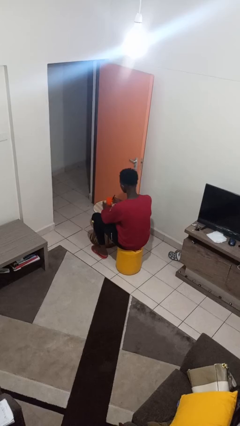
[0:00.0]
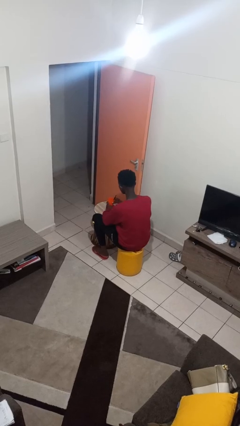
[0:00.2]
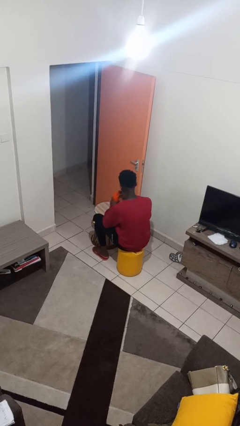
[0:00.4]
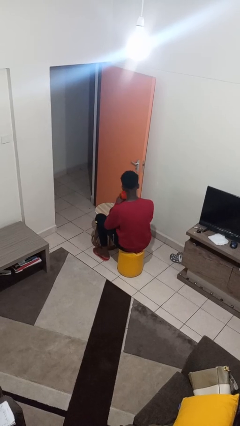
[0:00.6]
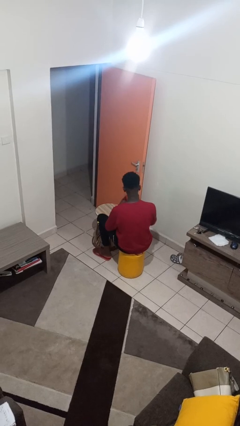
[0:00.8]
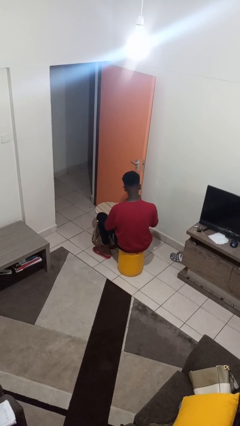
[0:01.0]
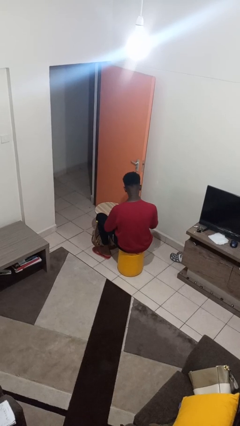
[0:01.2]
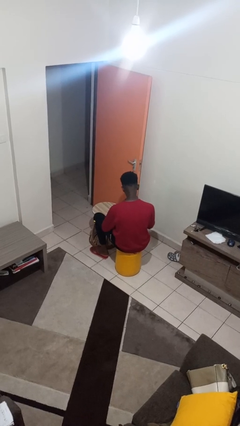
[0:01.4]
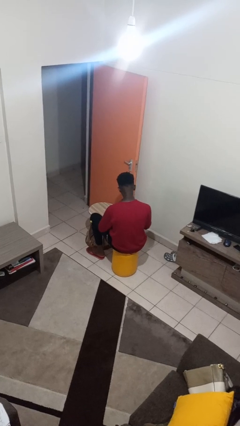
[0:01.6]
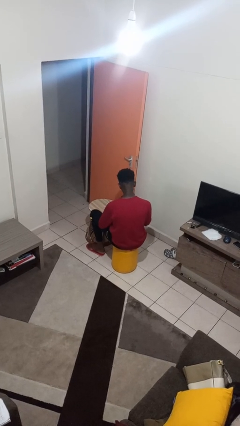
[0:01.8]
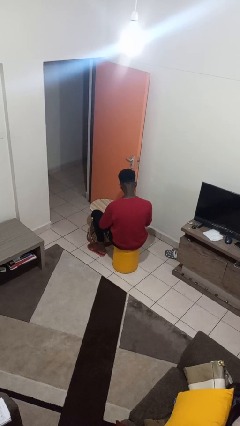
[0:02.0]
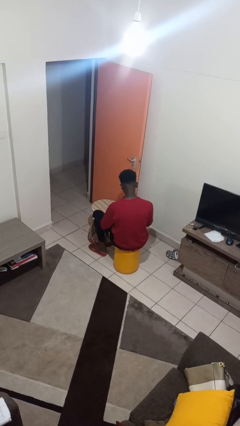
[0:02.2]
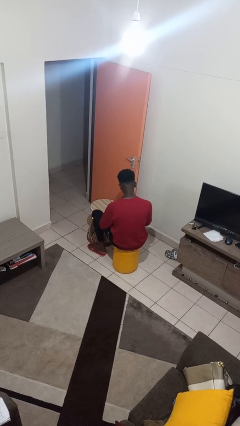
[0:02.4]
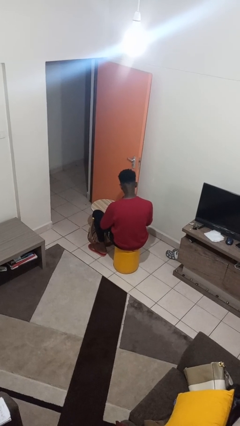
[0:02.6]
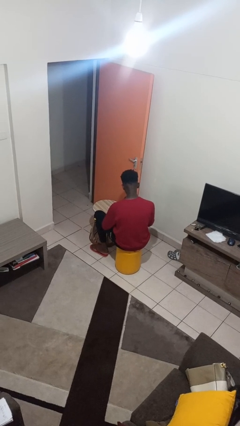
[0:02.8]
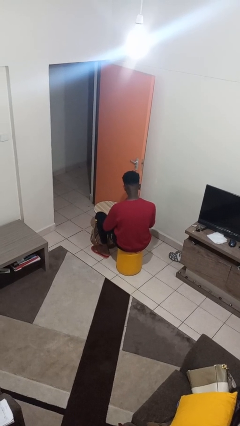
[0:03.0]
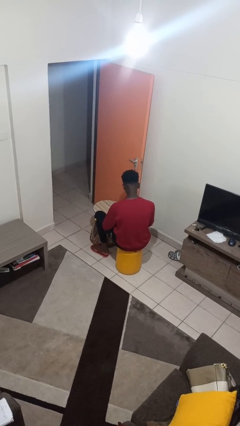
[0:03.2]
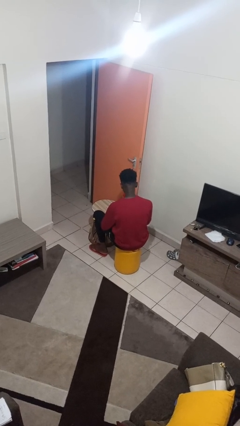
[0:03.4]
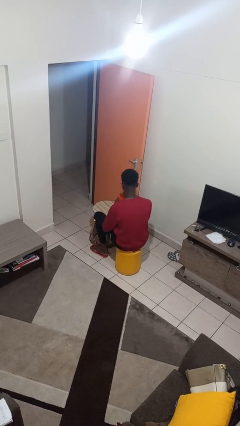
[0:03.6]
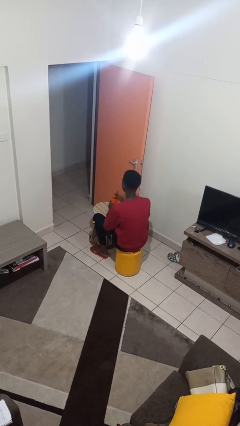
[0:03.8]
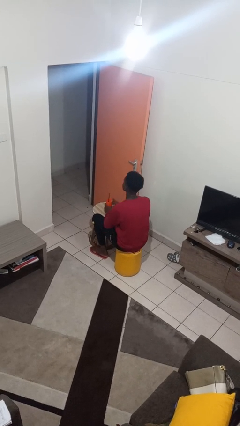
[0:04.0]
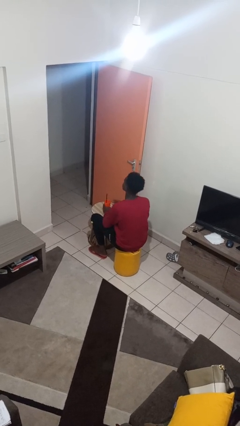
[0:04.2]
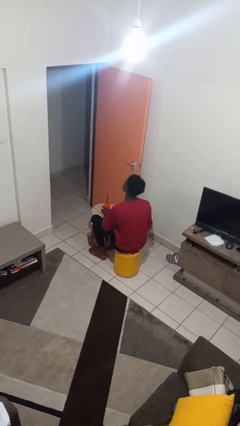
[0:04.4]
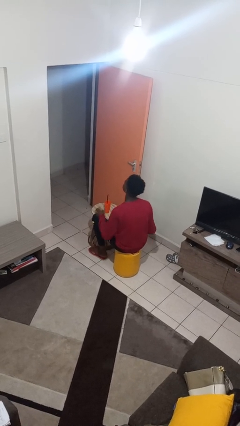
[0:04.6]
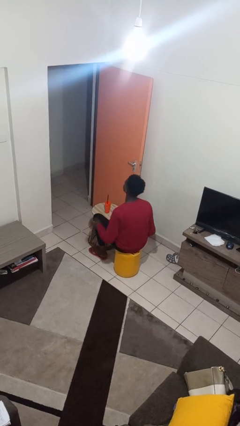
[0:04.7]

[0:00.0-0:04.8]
person drinks from straw

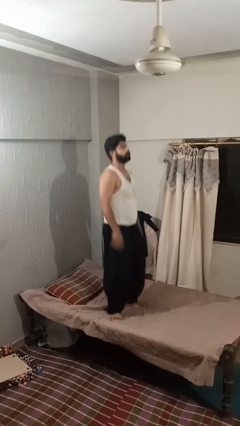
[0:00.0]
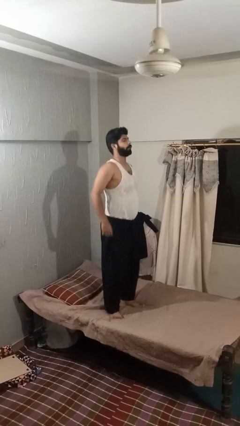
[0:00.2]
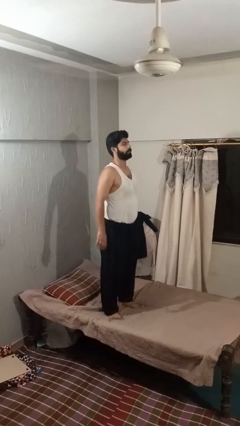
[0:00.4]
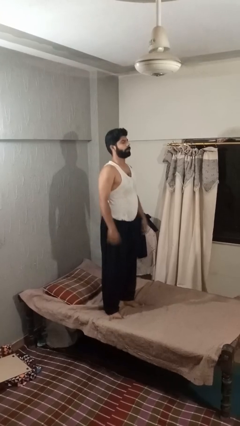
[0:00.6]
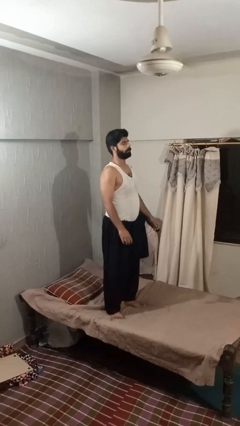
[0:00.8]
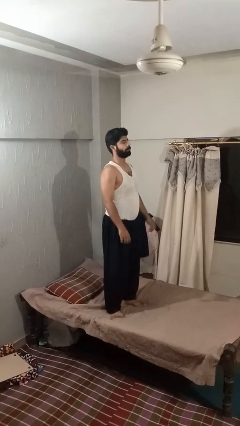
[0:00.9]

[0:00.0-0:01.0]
person jumps on bed

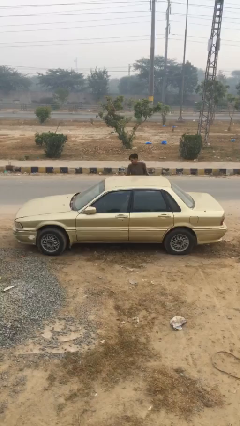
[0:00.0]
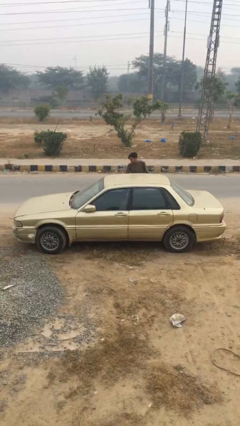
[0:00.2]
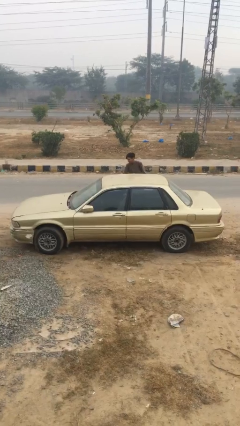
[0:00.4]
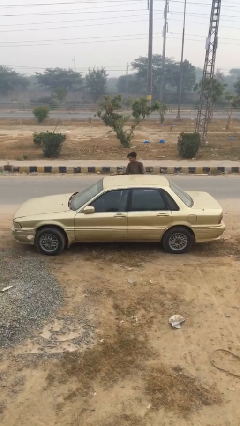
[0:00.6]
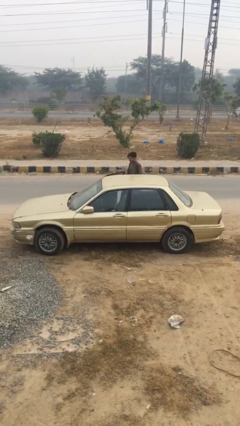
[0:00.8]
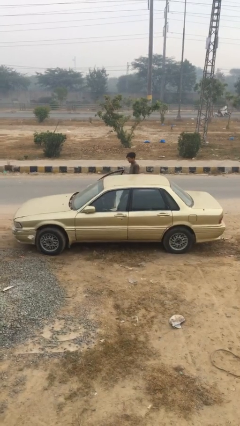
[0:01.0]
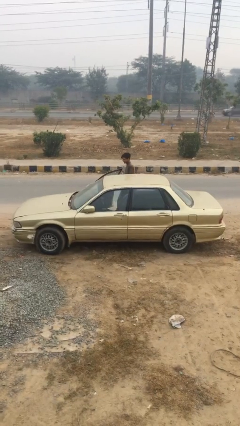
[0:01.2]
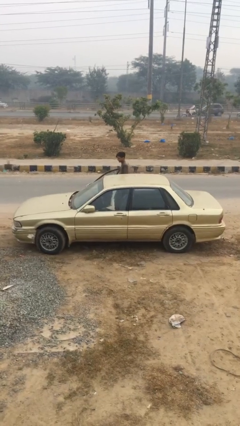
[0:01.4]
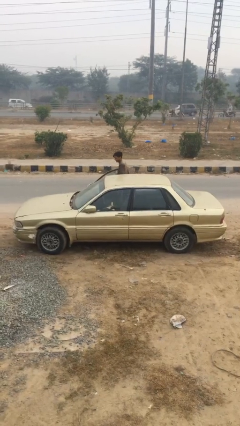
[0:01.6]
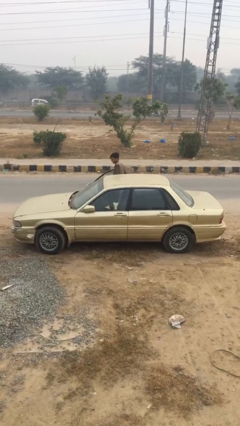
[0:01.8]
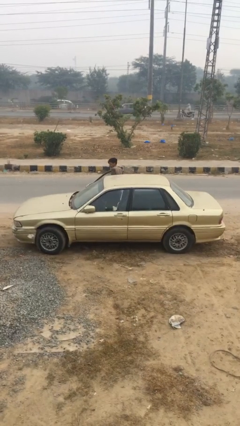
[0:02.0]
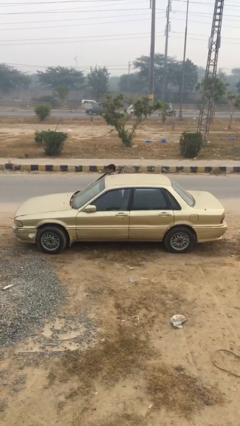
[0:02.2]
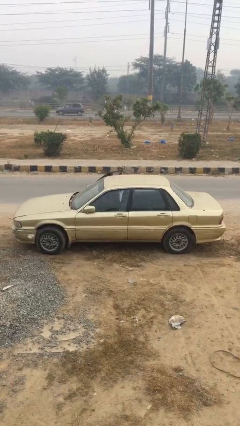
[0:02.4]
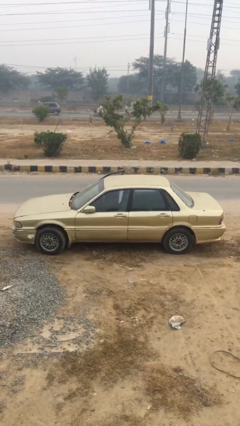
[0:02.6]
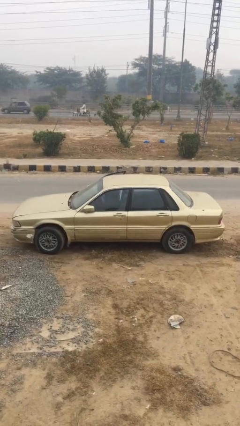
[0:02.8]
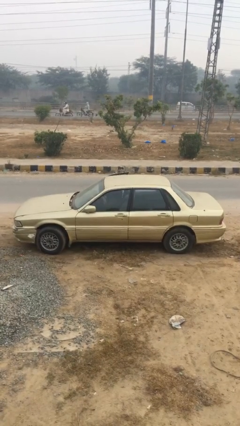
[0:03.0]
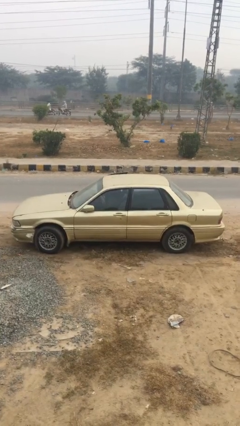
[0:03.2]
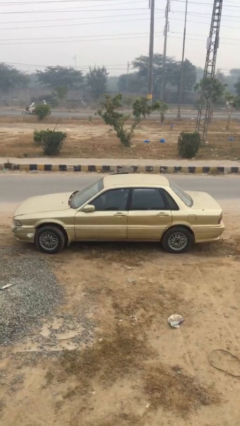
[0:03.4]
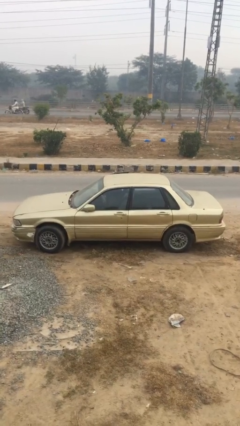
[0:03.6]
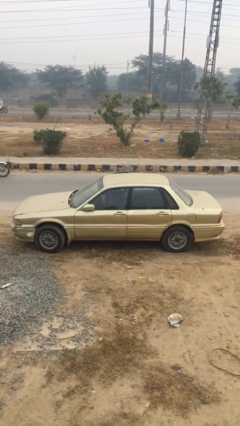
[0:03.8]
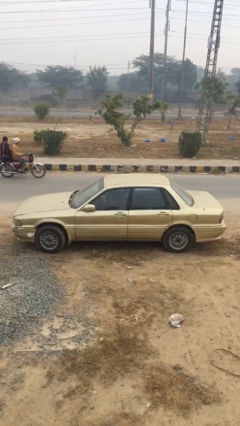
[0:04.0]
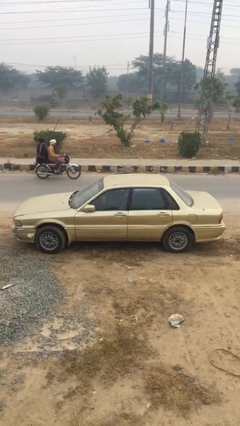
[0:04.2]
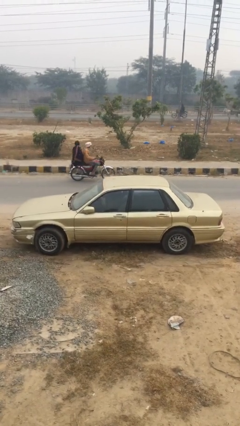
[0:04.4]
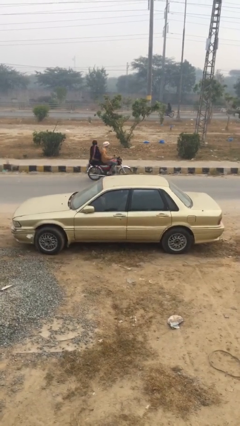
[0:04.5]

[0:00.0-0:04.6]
car picks up person

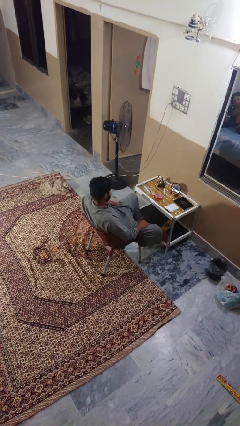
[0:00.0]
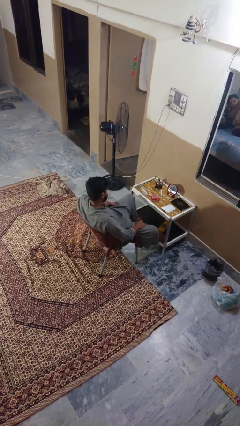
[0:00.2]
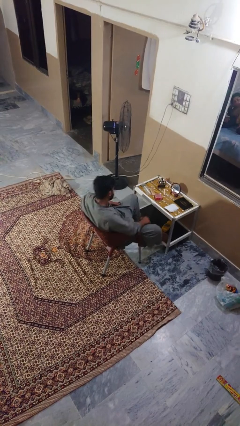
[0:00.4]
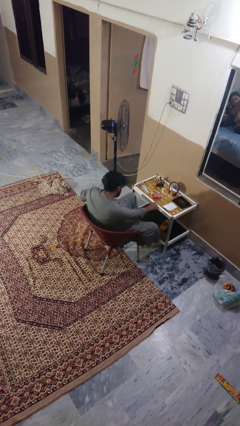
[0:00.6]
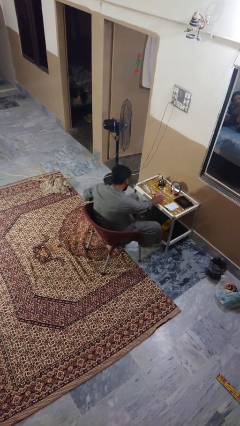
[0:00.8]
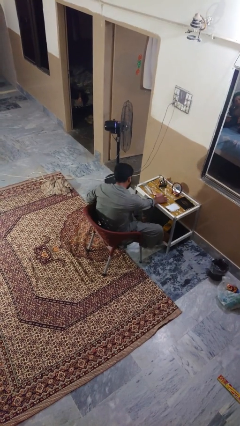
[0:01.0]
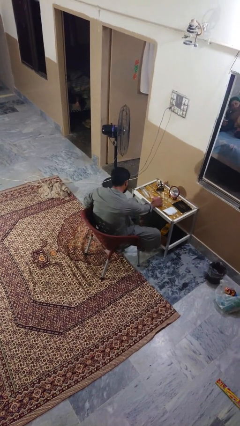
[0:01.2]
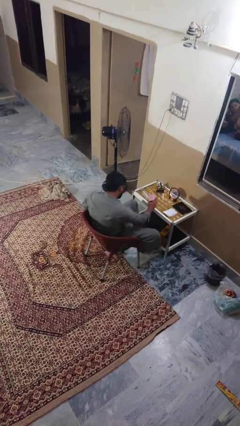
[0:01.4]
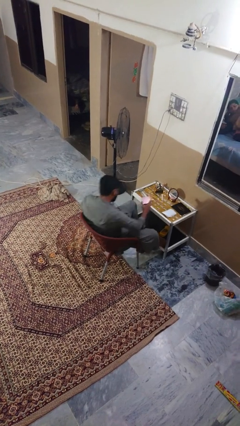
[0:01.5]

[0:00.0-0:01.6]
person picks up object from table

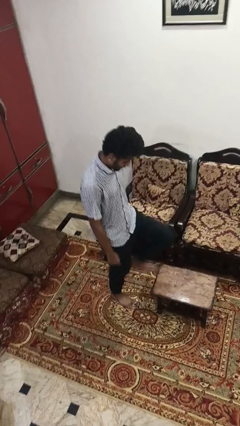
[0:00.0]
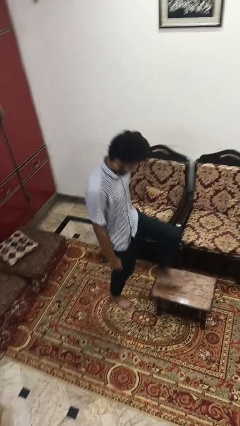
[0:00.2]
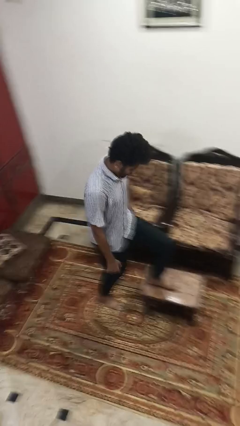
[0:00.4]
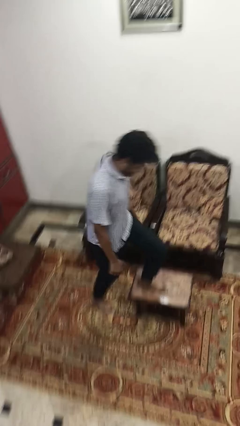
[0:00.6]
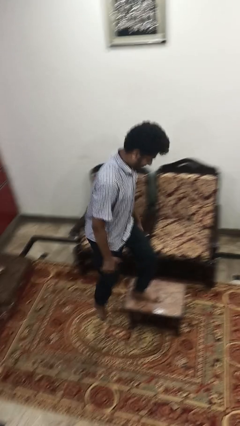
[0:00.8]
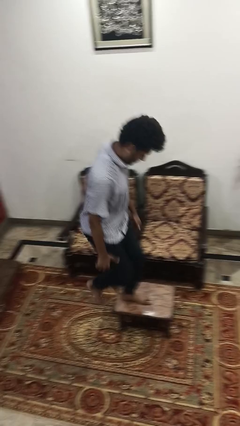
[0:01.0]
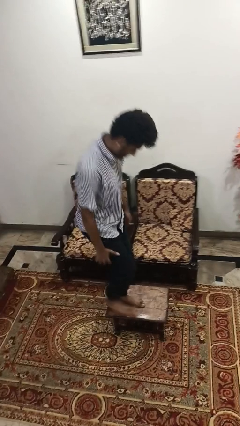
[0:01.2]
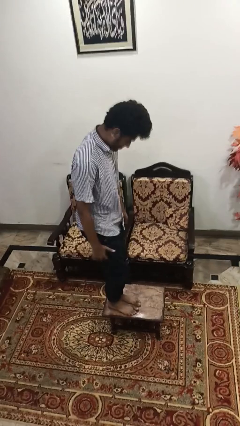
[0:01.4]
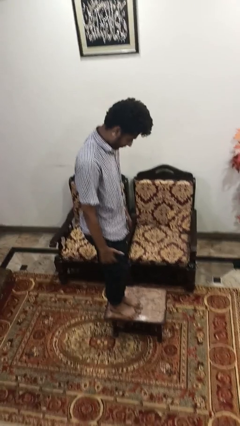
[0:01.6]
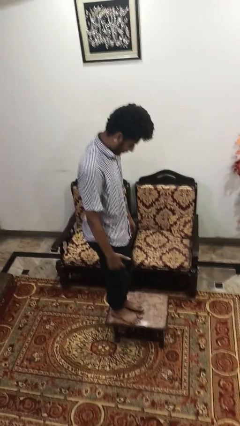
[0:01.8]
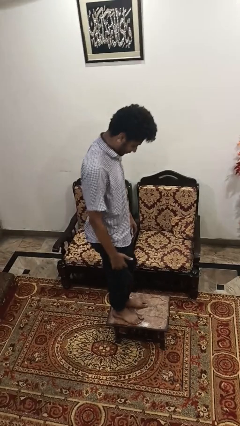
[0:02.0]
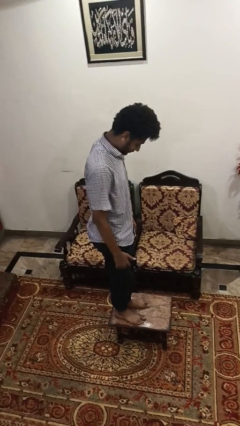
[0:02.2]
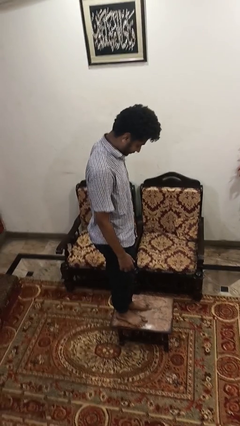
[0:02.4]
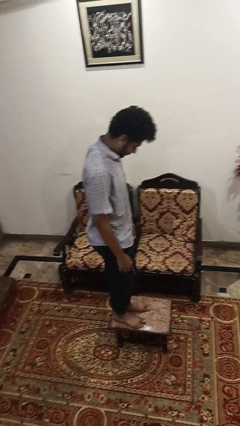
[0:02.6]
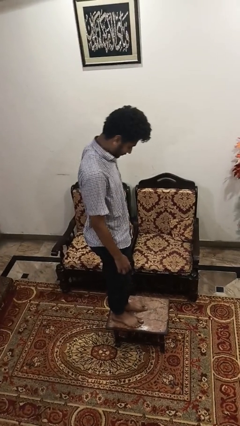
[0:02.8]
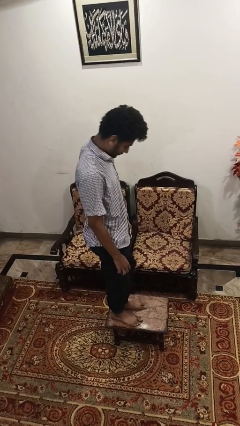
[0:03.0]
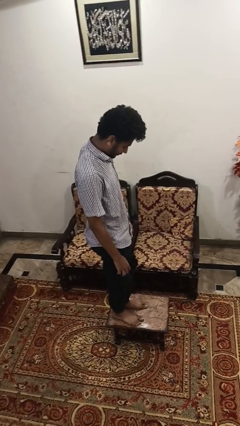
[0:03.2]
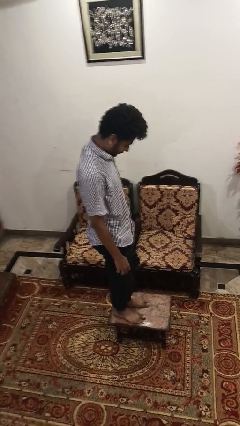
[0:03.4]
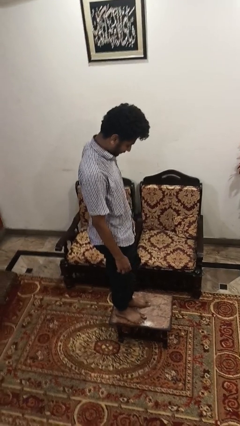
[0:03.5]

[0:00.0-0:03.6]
person climbs on table

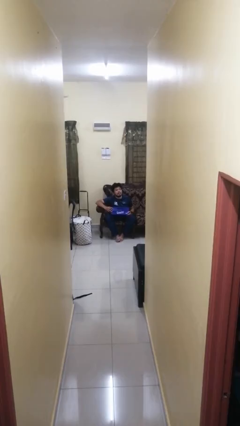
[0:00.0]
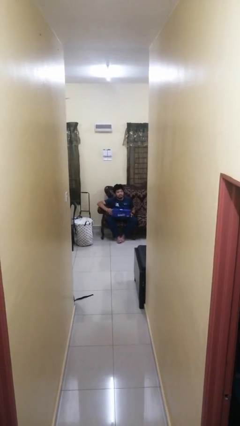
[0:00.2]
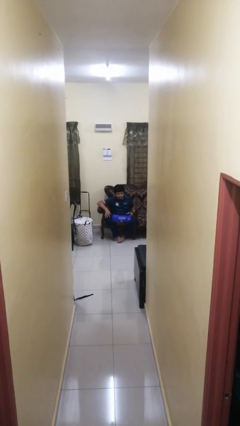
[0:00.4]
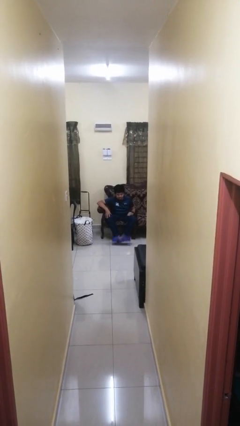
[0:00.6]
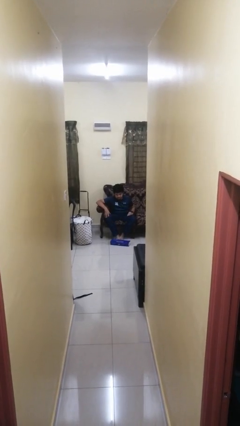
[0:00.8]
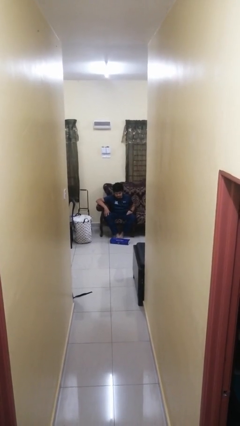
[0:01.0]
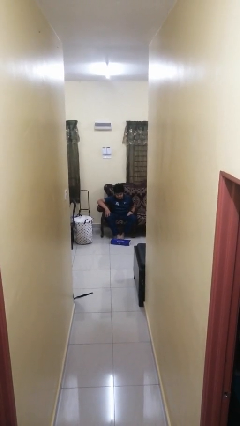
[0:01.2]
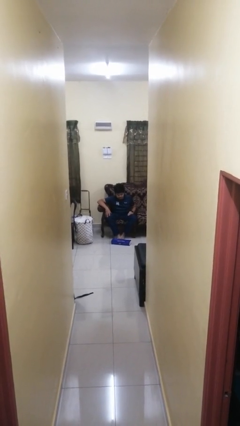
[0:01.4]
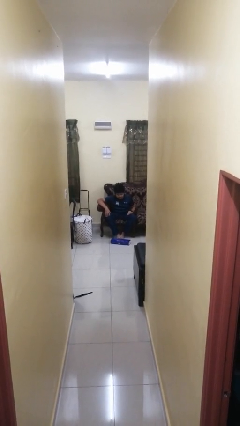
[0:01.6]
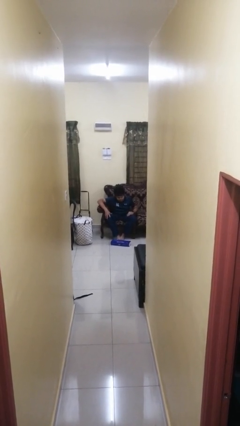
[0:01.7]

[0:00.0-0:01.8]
person drops object
